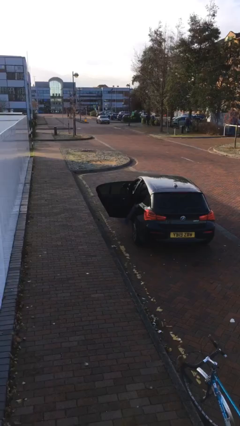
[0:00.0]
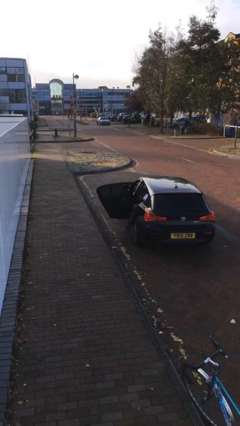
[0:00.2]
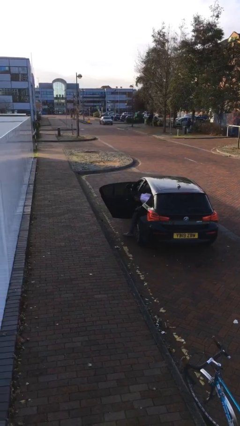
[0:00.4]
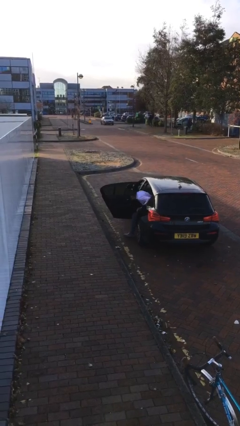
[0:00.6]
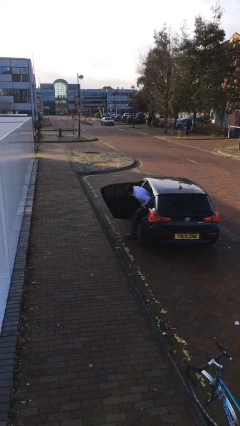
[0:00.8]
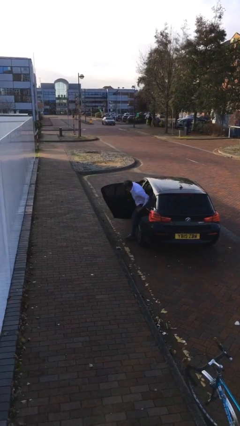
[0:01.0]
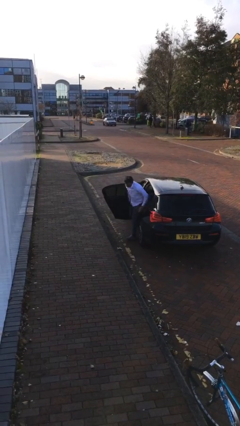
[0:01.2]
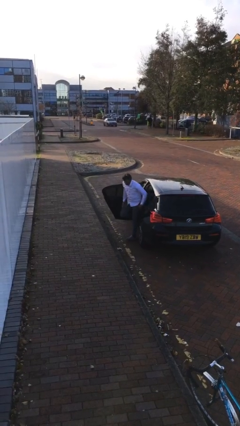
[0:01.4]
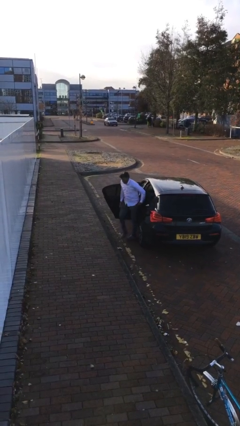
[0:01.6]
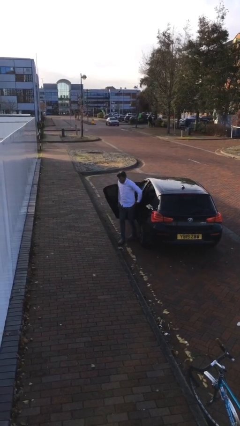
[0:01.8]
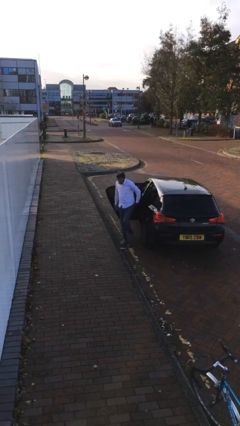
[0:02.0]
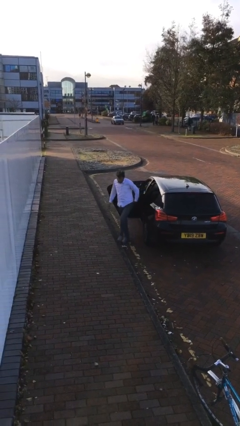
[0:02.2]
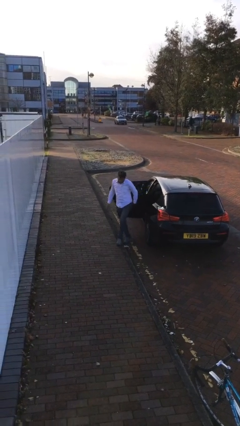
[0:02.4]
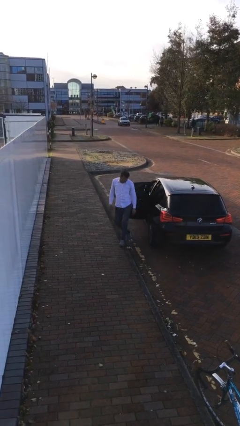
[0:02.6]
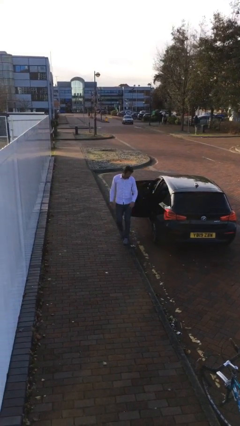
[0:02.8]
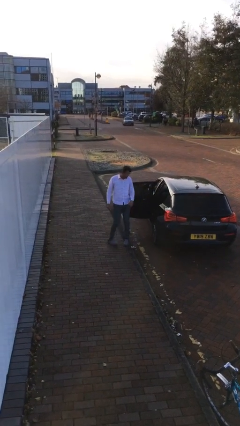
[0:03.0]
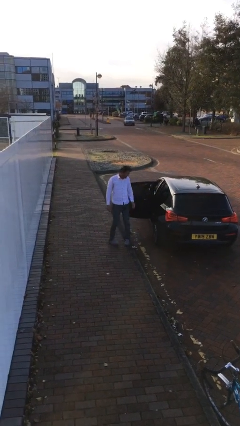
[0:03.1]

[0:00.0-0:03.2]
person exits car

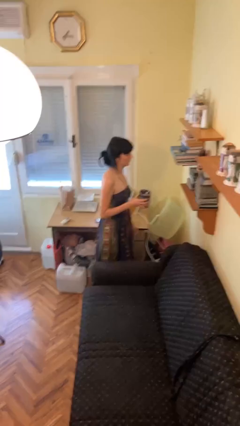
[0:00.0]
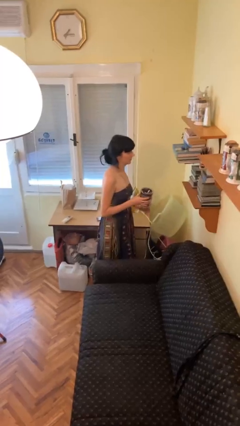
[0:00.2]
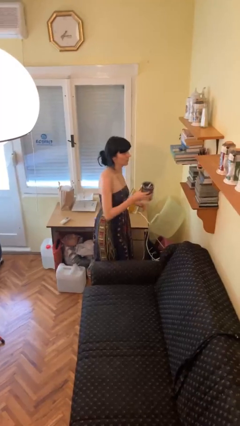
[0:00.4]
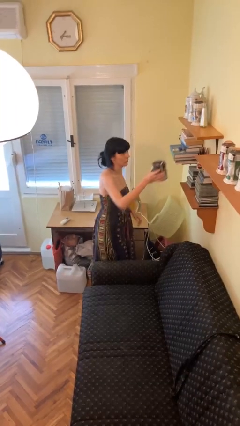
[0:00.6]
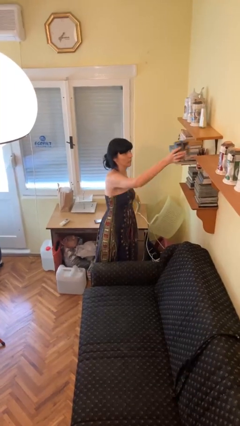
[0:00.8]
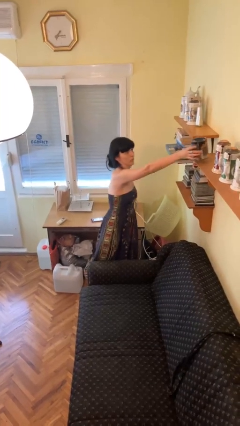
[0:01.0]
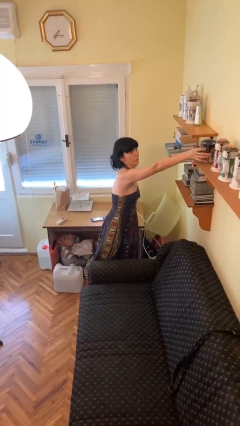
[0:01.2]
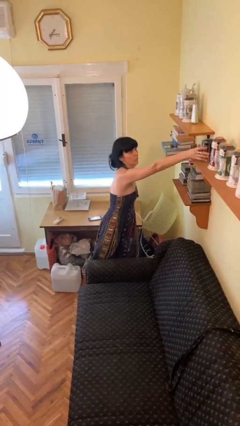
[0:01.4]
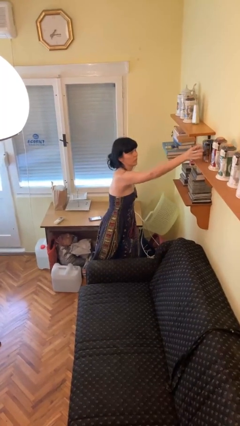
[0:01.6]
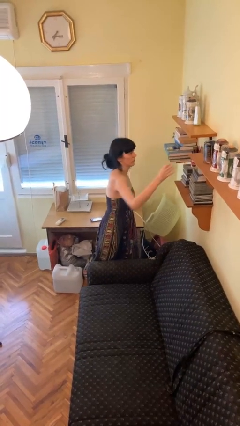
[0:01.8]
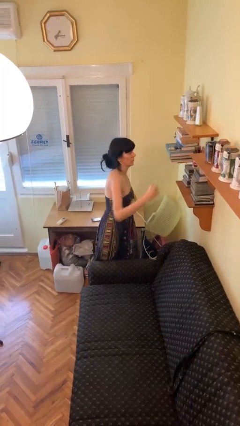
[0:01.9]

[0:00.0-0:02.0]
person puts down object on shelf

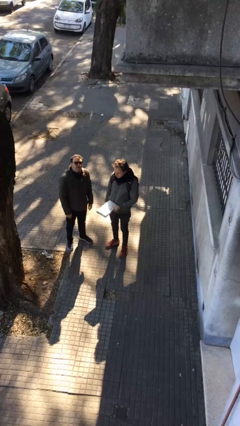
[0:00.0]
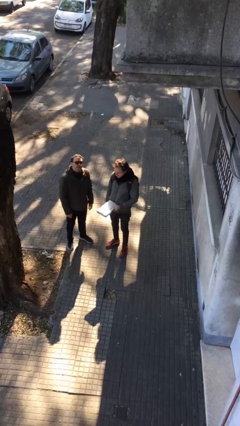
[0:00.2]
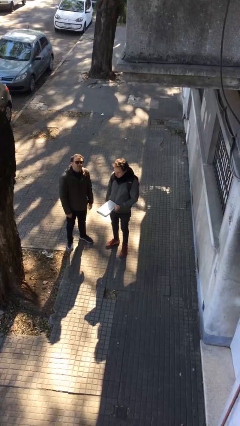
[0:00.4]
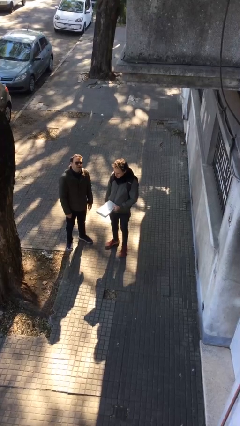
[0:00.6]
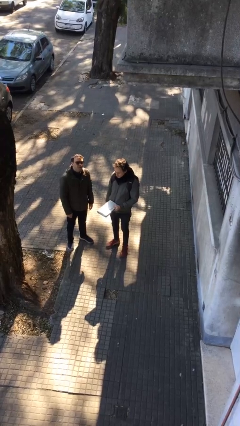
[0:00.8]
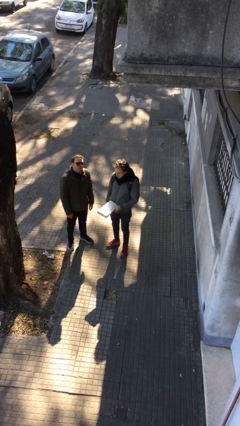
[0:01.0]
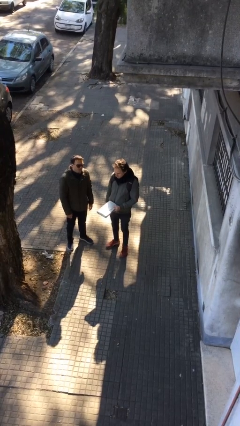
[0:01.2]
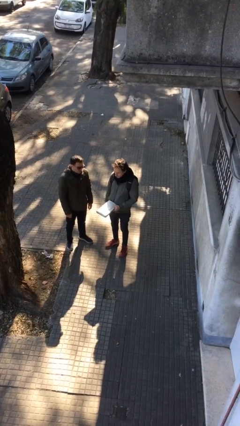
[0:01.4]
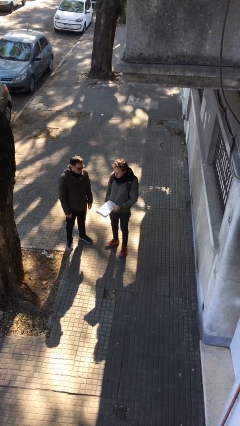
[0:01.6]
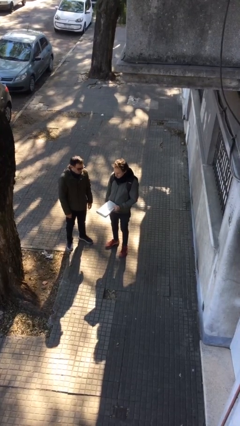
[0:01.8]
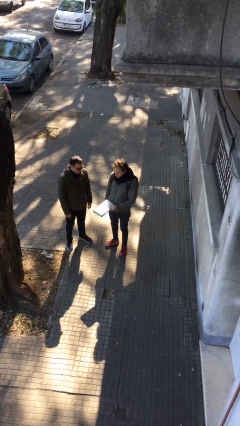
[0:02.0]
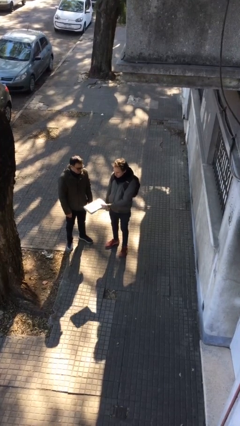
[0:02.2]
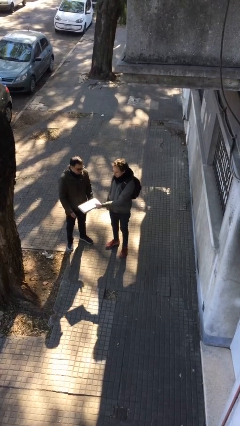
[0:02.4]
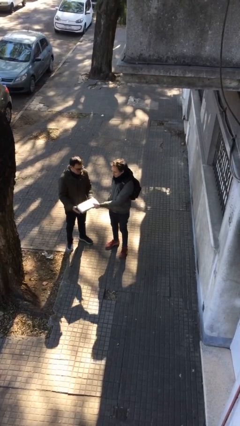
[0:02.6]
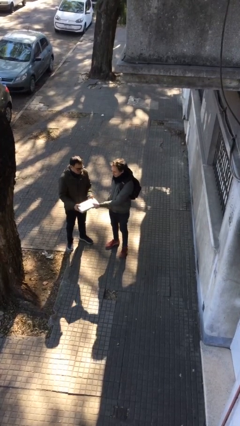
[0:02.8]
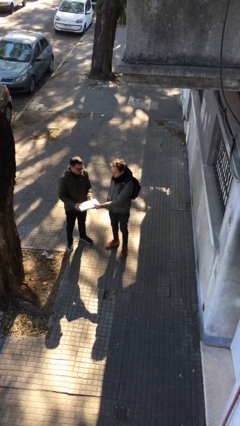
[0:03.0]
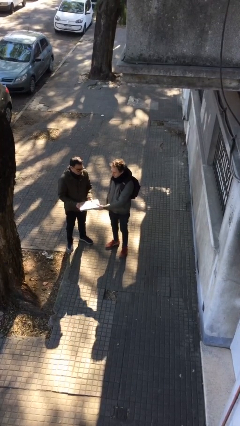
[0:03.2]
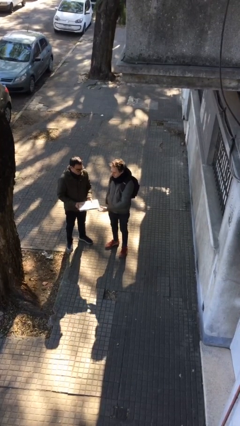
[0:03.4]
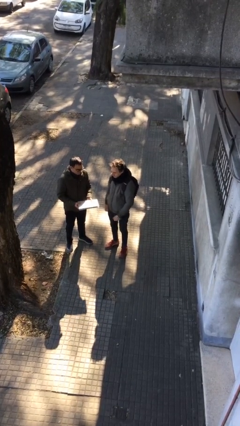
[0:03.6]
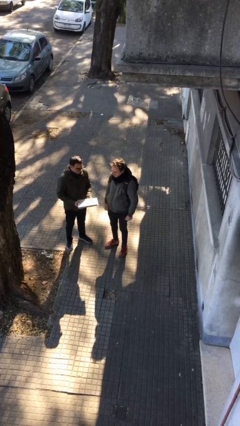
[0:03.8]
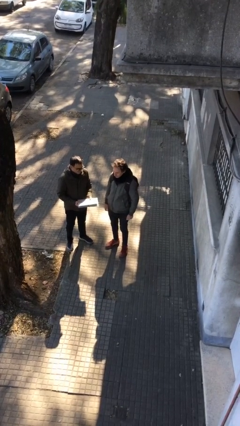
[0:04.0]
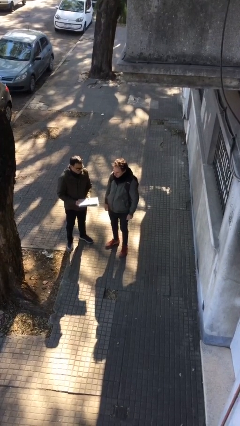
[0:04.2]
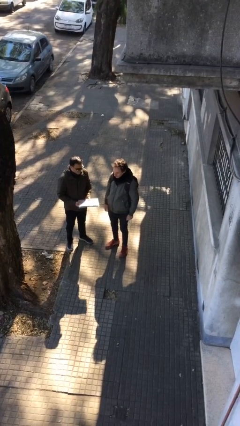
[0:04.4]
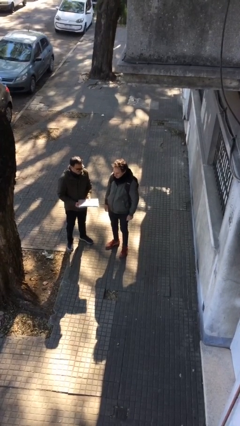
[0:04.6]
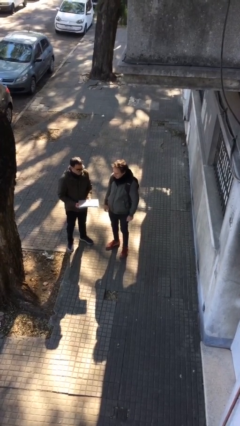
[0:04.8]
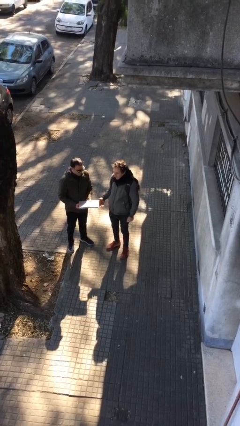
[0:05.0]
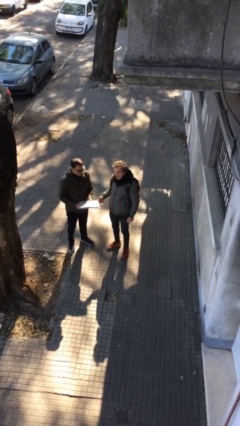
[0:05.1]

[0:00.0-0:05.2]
person transfers object to person

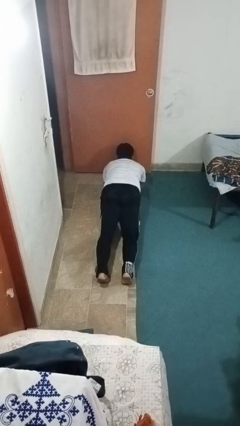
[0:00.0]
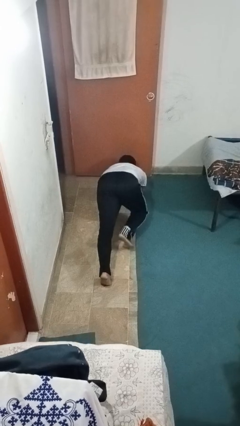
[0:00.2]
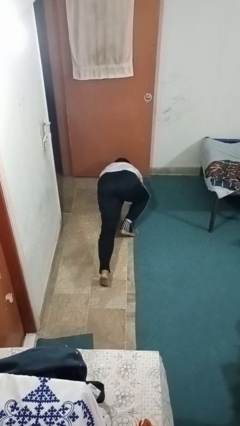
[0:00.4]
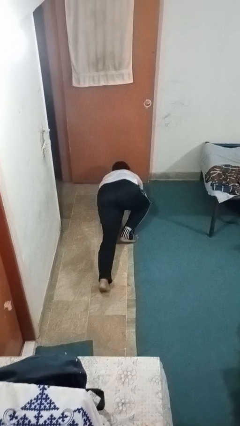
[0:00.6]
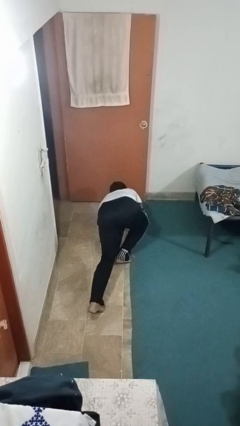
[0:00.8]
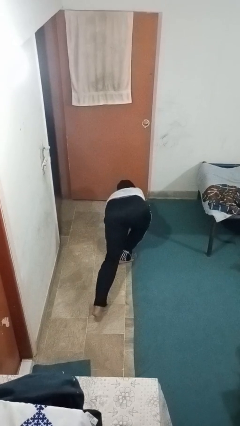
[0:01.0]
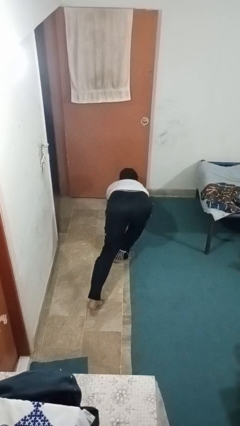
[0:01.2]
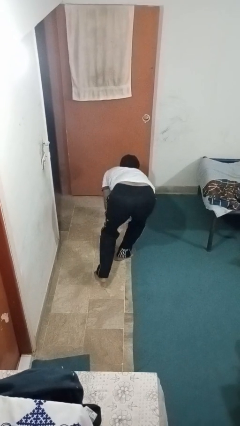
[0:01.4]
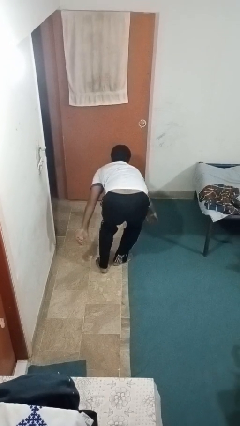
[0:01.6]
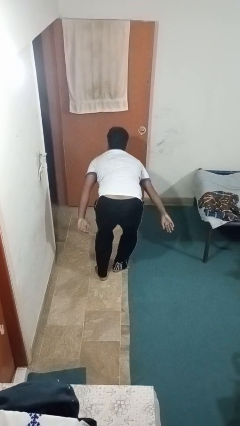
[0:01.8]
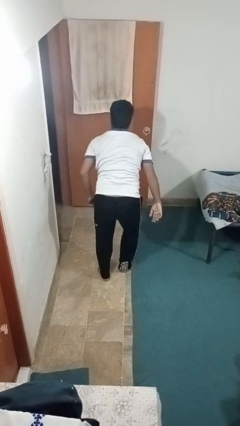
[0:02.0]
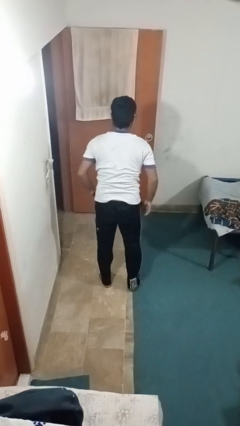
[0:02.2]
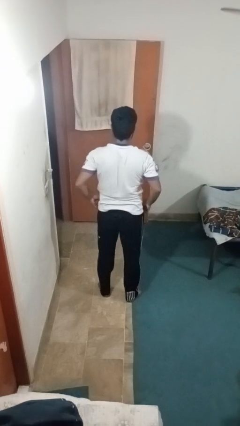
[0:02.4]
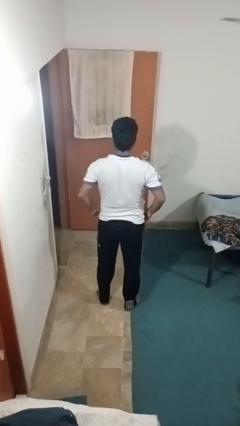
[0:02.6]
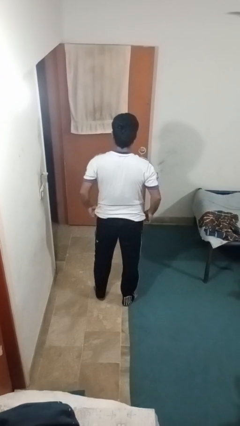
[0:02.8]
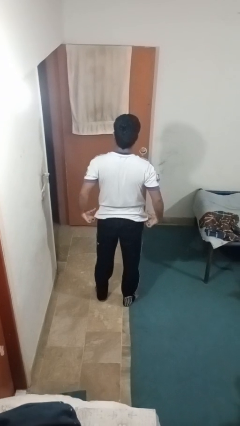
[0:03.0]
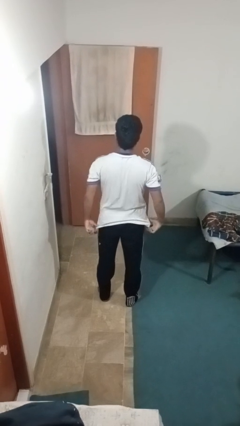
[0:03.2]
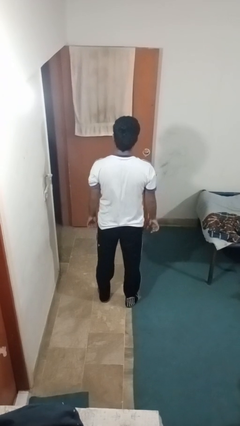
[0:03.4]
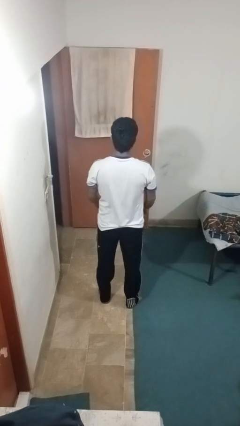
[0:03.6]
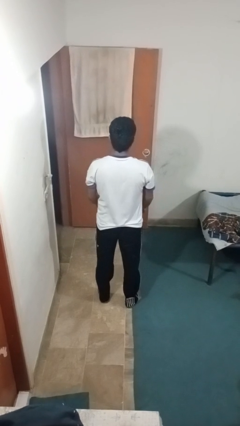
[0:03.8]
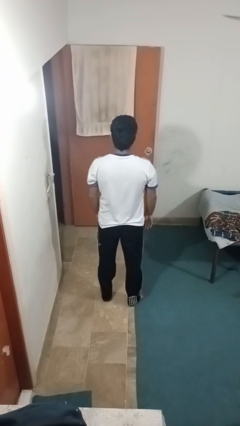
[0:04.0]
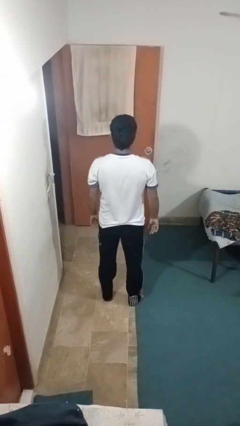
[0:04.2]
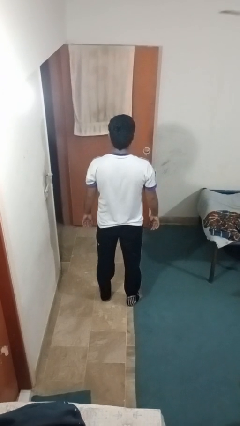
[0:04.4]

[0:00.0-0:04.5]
person stands up from floor

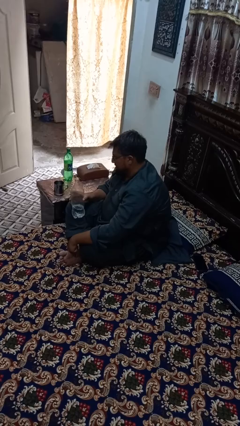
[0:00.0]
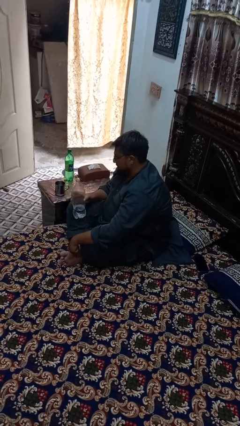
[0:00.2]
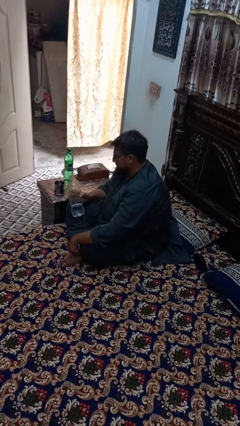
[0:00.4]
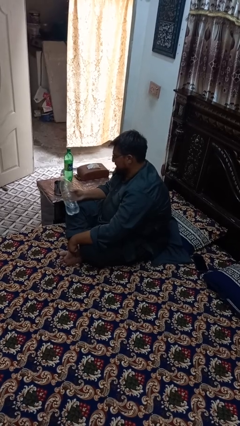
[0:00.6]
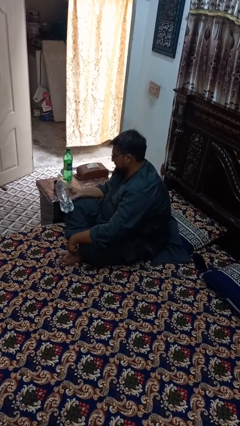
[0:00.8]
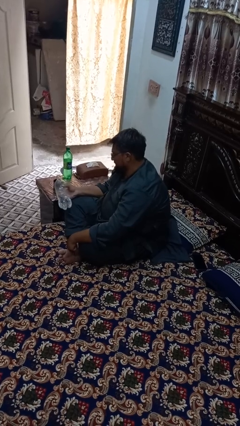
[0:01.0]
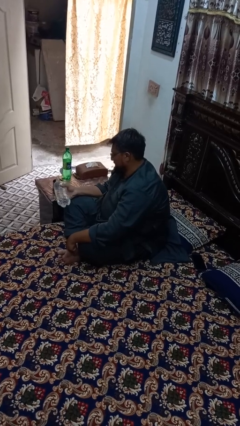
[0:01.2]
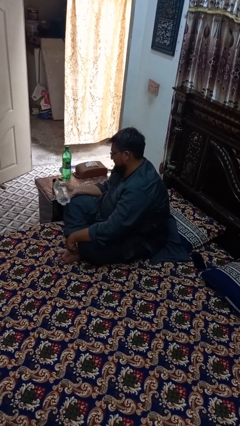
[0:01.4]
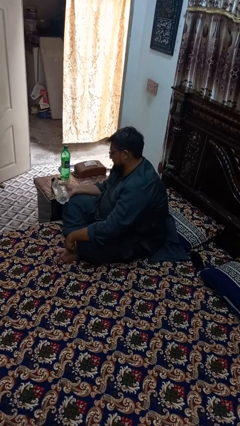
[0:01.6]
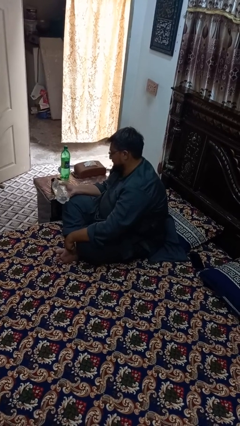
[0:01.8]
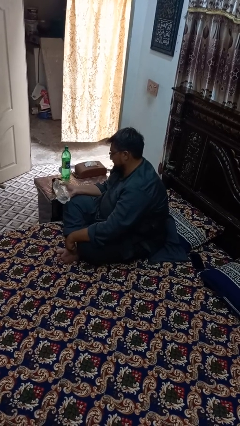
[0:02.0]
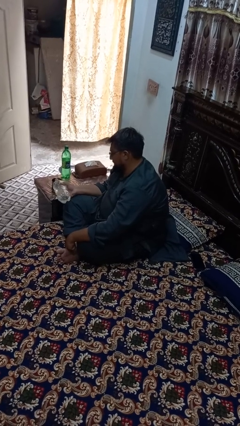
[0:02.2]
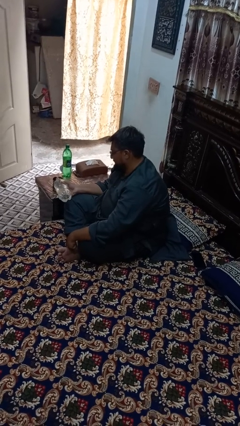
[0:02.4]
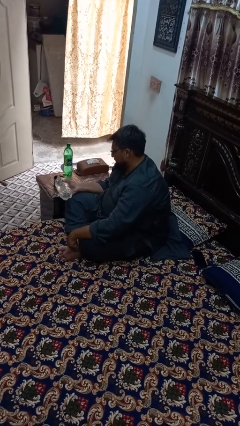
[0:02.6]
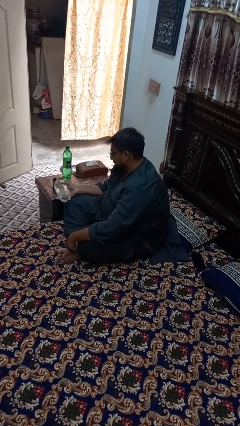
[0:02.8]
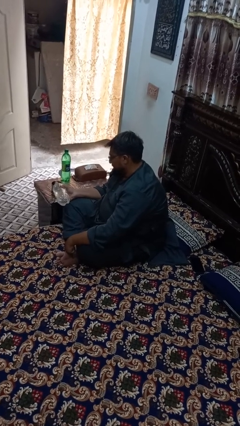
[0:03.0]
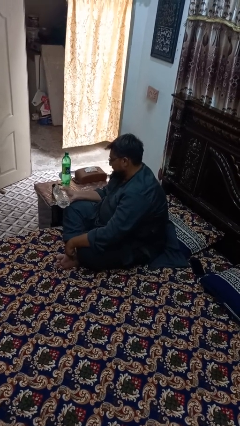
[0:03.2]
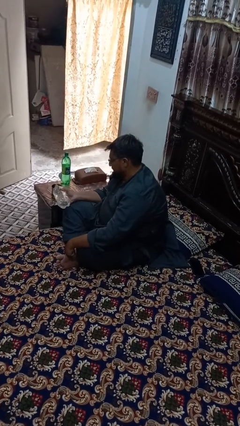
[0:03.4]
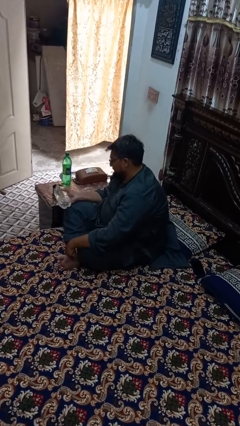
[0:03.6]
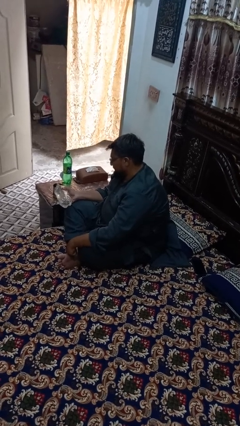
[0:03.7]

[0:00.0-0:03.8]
person pours liquid into cup
